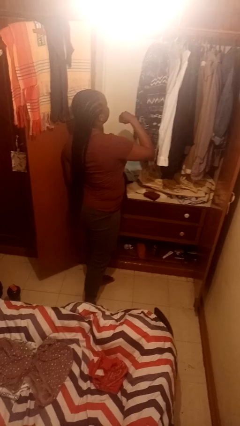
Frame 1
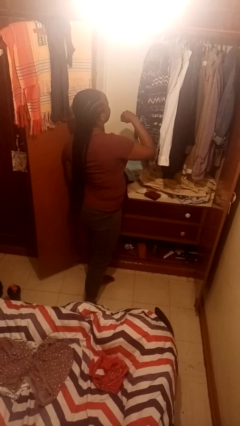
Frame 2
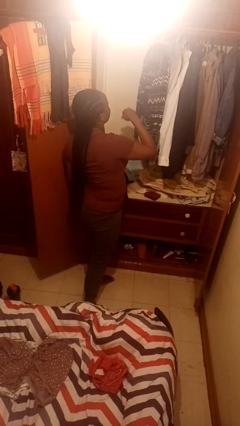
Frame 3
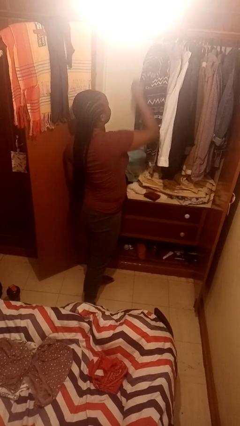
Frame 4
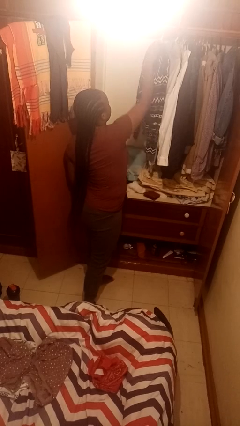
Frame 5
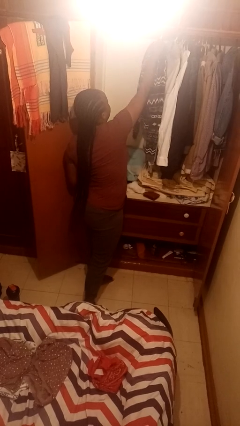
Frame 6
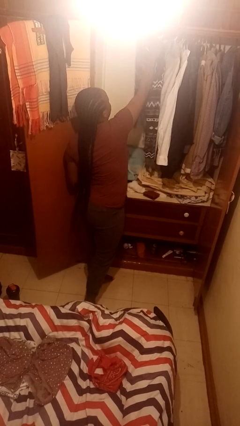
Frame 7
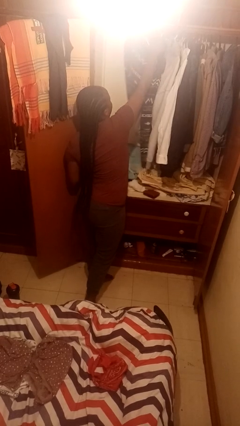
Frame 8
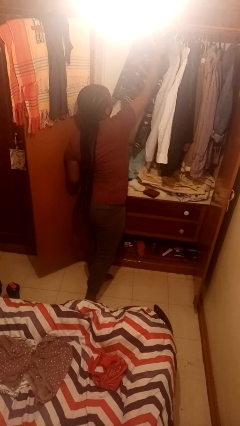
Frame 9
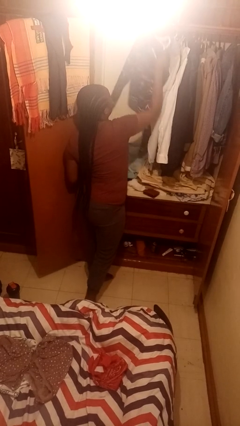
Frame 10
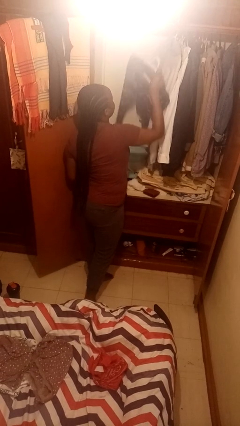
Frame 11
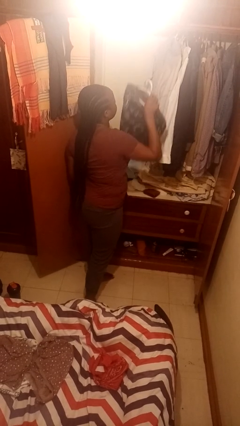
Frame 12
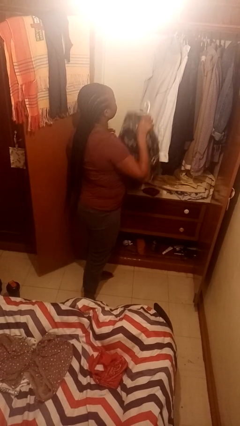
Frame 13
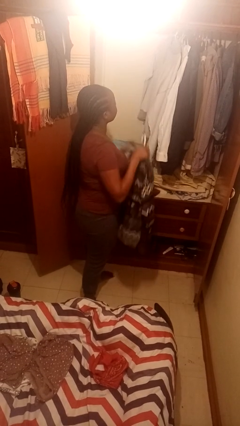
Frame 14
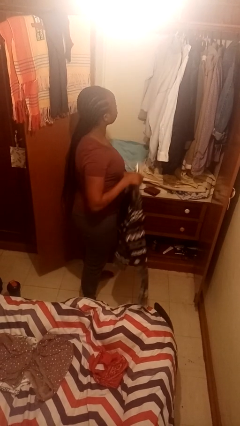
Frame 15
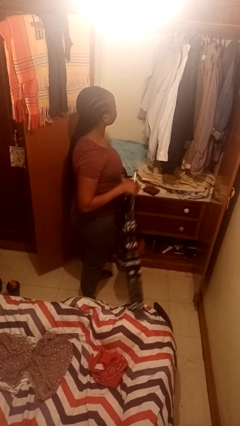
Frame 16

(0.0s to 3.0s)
person takes clothes from closet

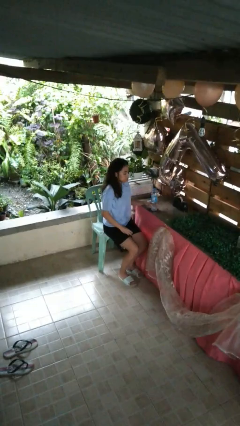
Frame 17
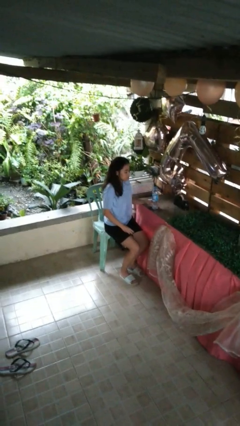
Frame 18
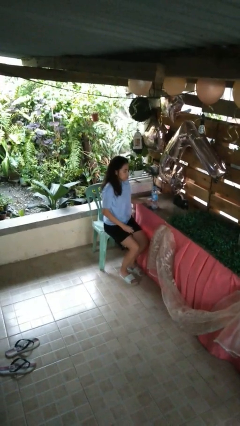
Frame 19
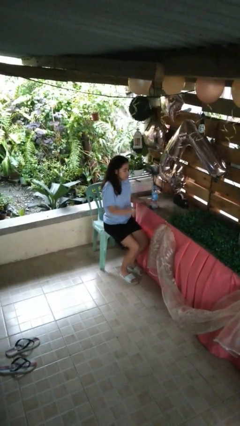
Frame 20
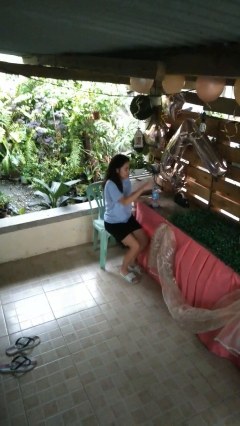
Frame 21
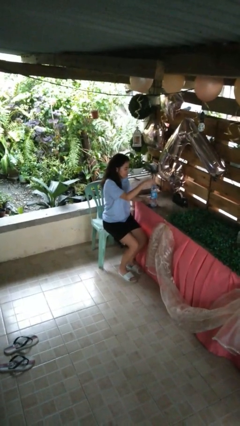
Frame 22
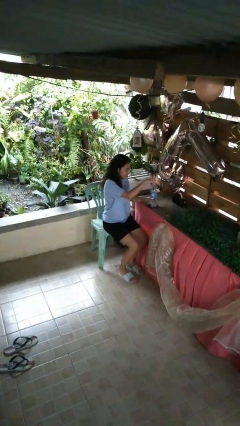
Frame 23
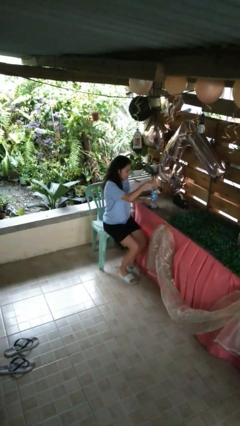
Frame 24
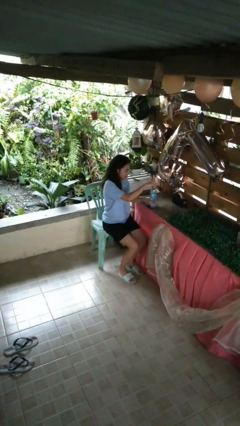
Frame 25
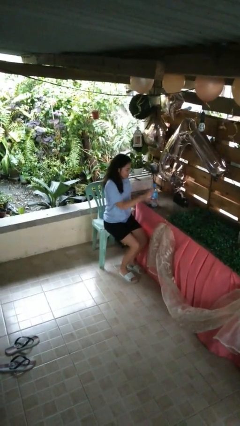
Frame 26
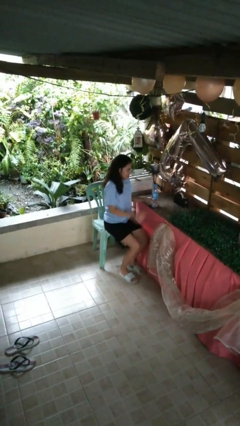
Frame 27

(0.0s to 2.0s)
person screws lid to bottle

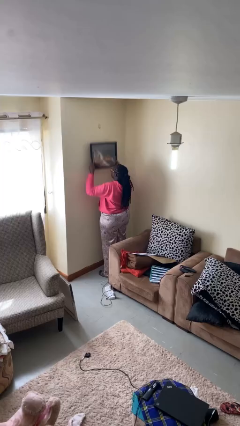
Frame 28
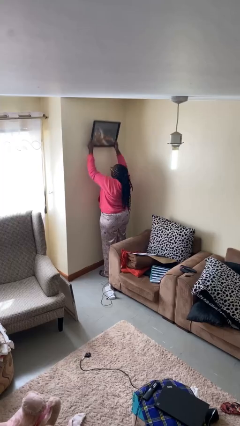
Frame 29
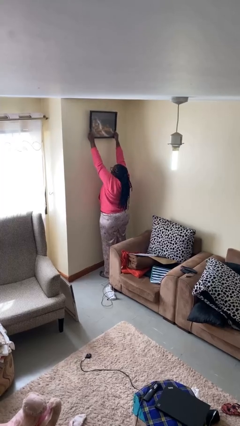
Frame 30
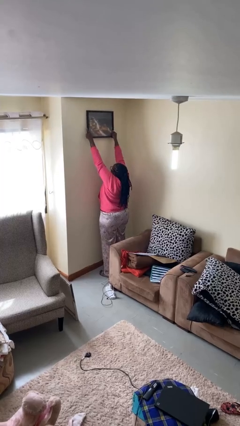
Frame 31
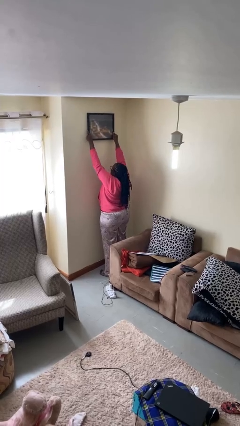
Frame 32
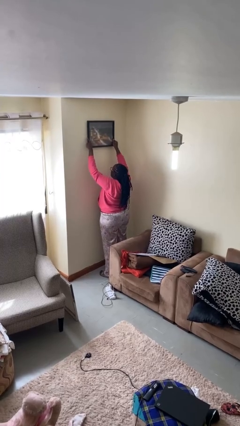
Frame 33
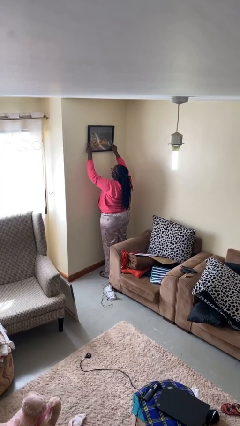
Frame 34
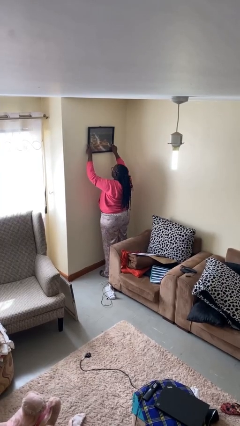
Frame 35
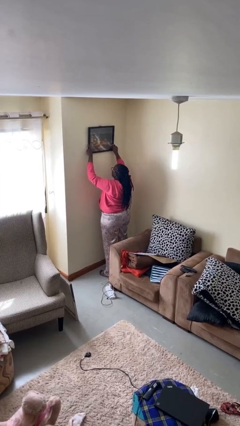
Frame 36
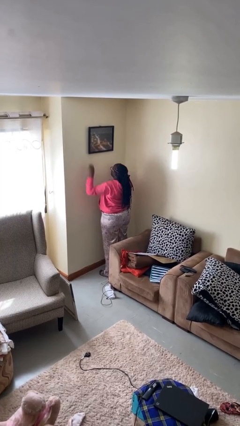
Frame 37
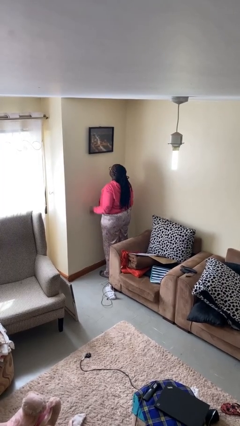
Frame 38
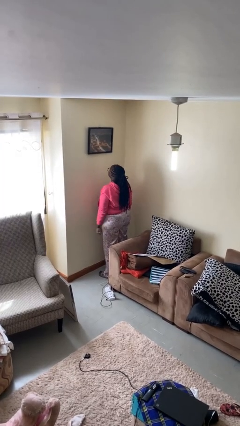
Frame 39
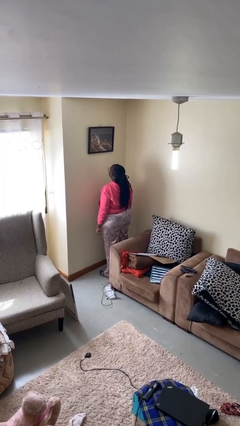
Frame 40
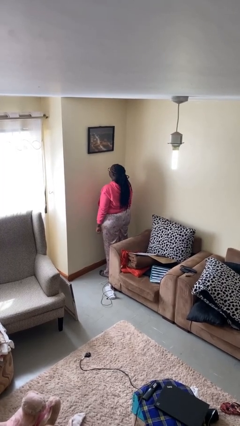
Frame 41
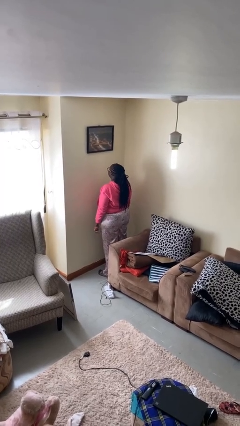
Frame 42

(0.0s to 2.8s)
person puts up picture frame

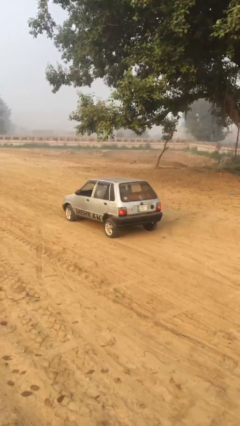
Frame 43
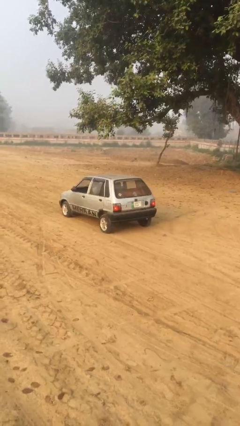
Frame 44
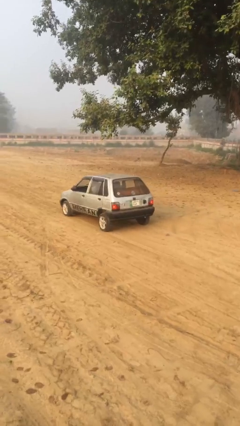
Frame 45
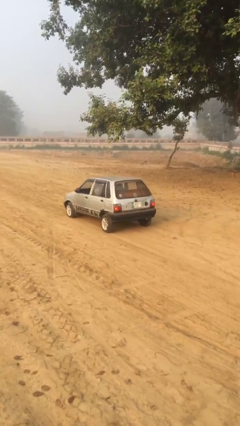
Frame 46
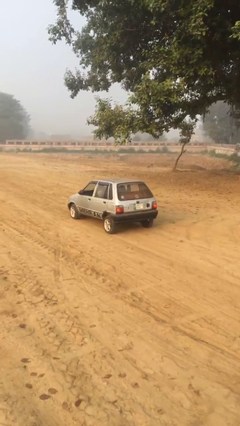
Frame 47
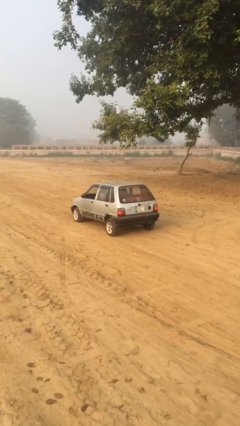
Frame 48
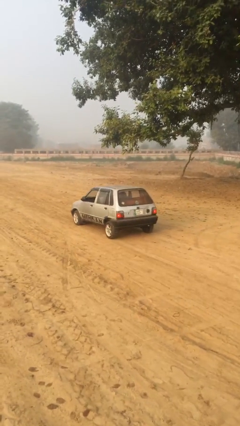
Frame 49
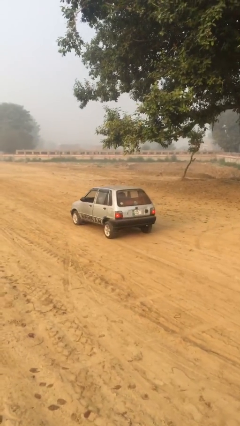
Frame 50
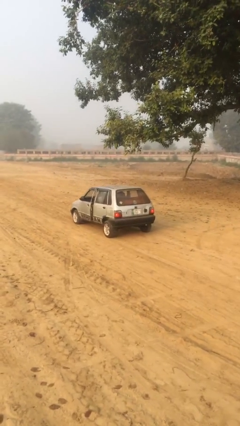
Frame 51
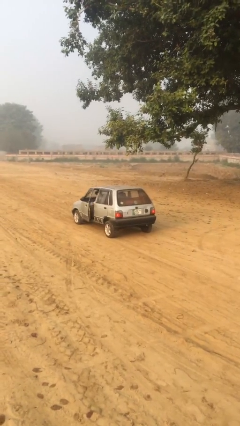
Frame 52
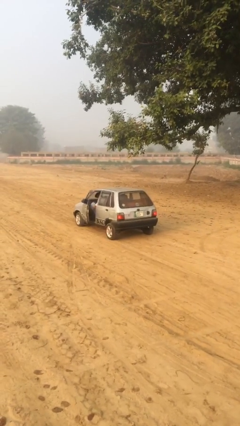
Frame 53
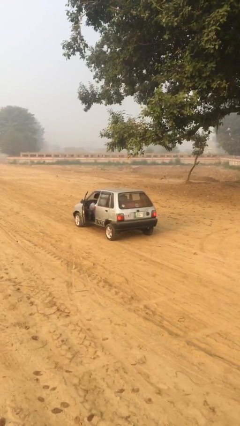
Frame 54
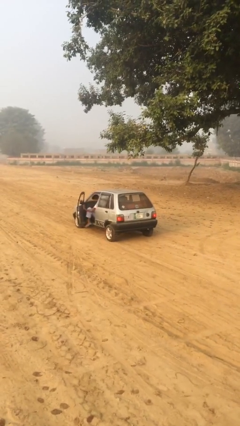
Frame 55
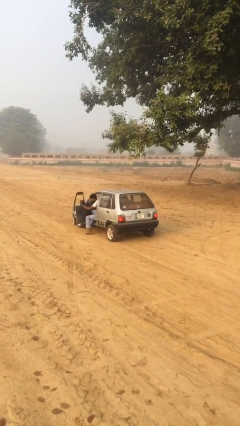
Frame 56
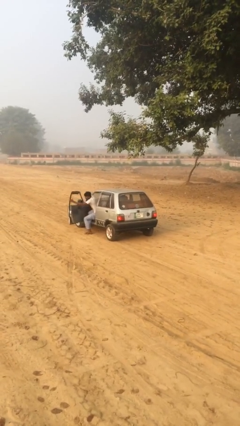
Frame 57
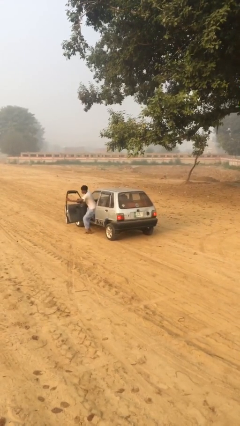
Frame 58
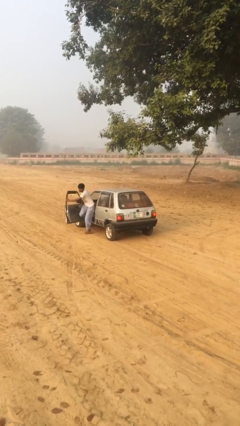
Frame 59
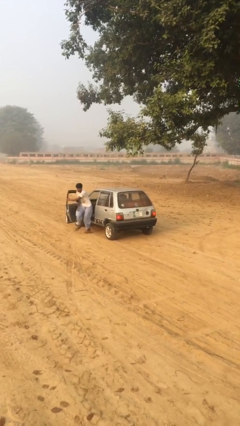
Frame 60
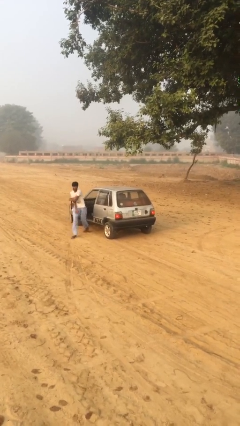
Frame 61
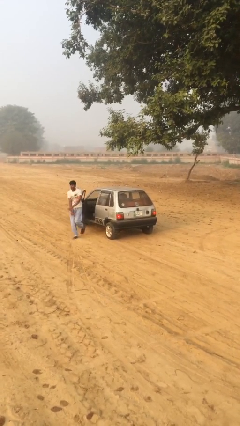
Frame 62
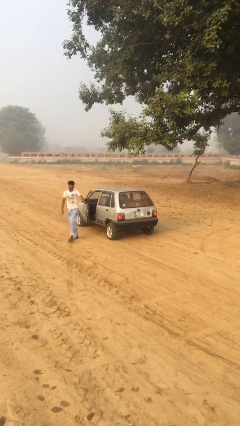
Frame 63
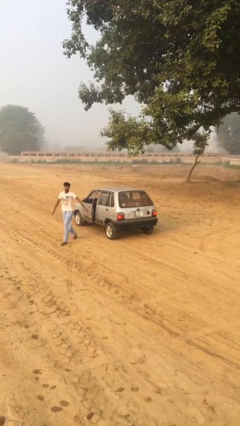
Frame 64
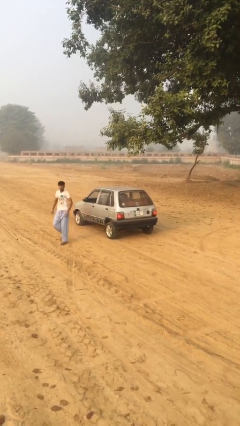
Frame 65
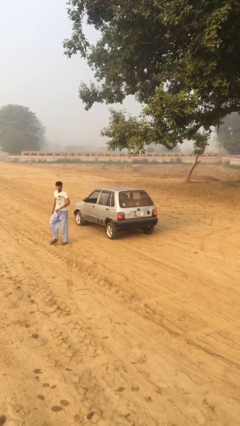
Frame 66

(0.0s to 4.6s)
car drops off person

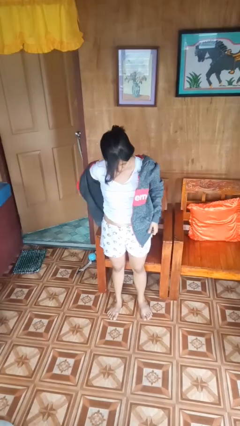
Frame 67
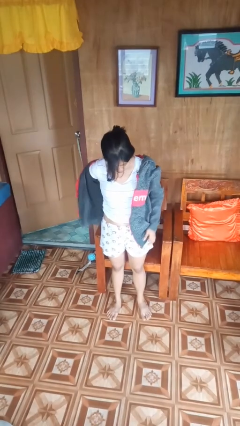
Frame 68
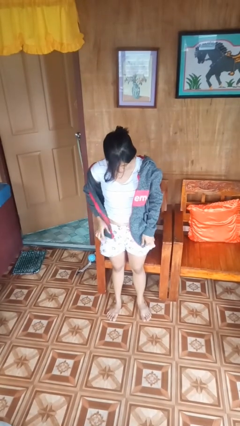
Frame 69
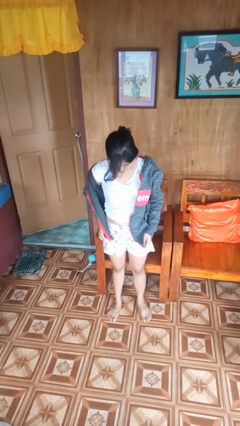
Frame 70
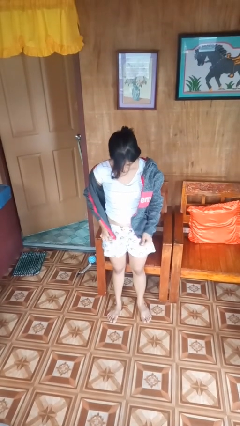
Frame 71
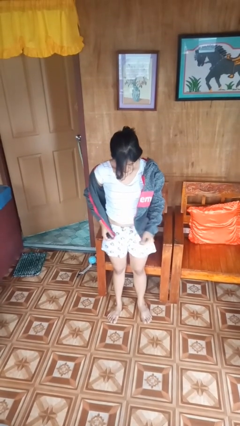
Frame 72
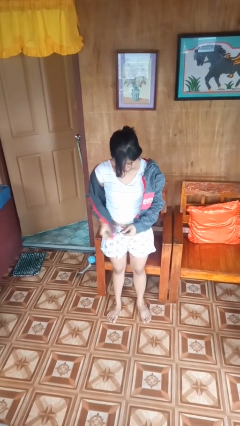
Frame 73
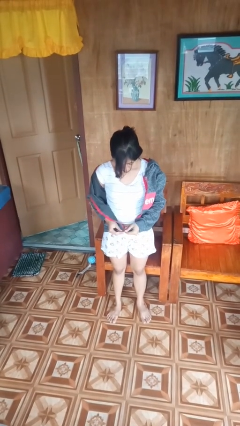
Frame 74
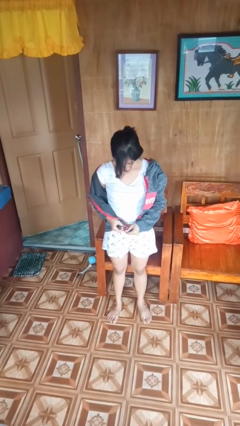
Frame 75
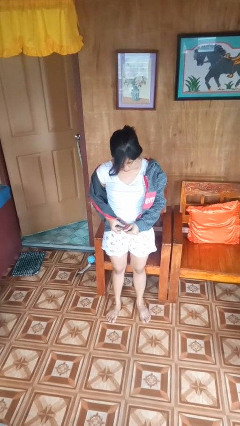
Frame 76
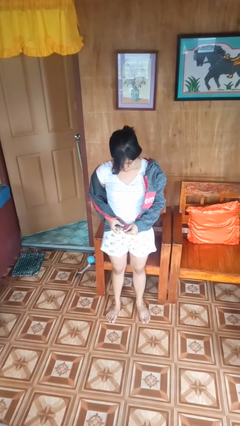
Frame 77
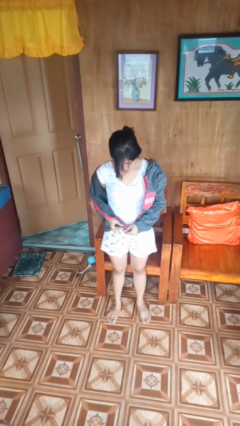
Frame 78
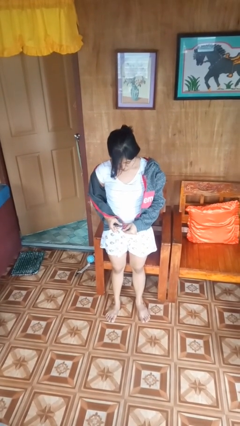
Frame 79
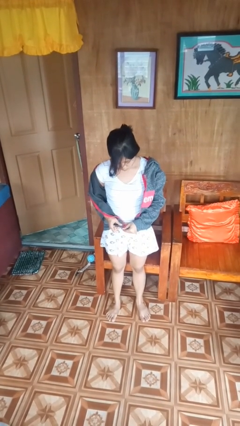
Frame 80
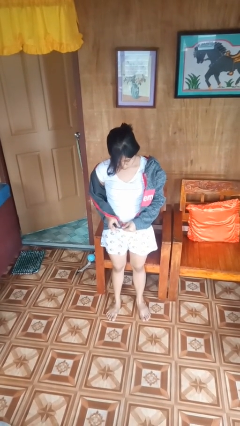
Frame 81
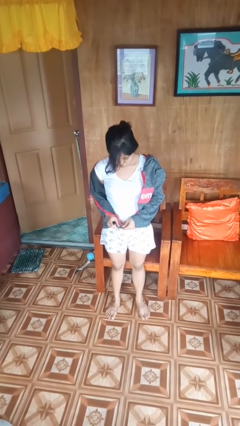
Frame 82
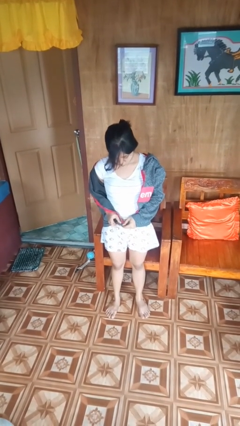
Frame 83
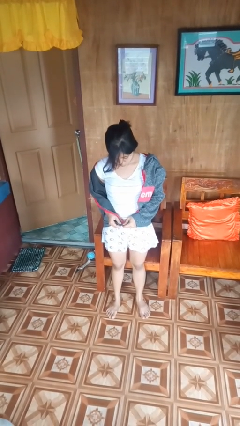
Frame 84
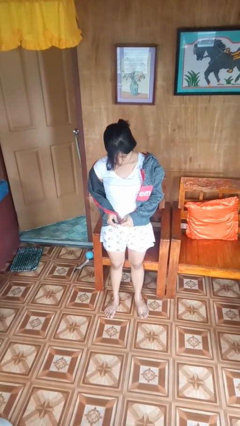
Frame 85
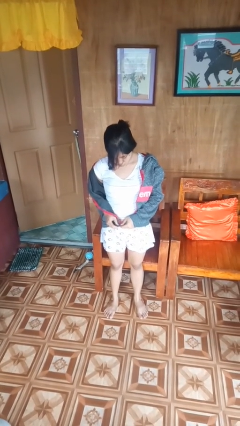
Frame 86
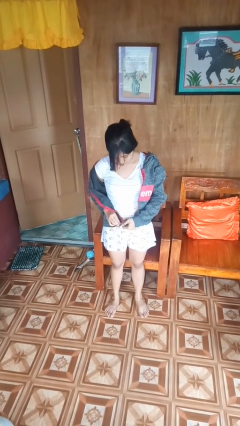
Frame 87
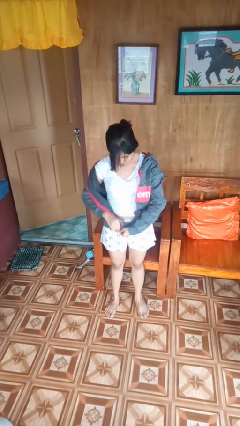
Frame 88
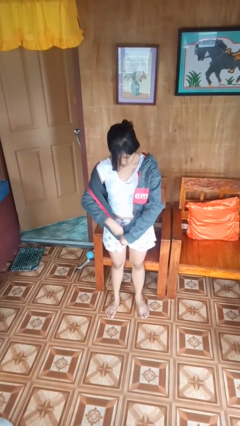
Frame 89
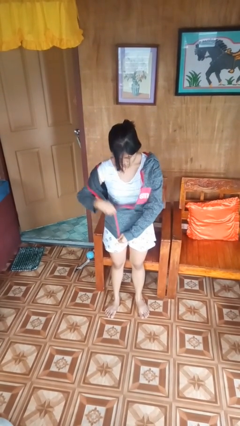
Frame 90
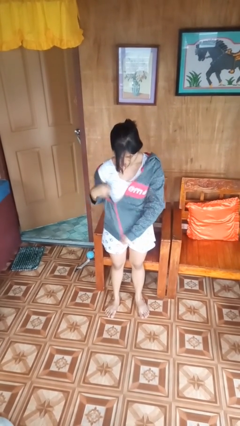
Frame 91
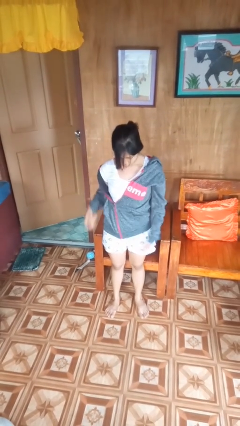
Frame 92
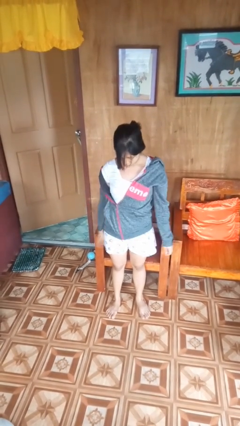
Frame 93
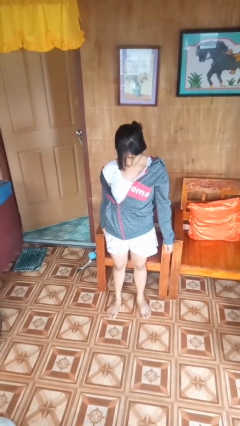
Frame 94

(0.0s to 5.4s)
person zips up jacket
